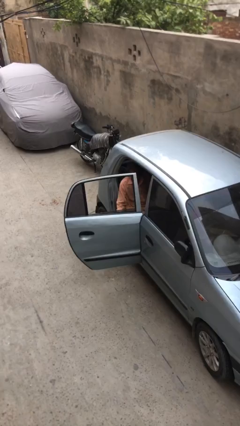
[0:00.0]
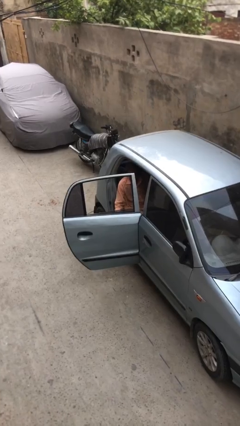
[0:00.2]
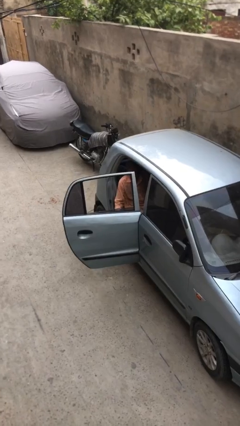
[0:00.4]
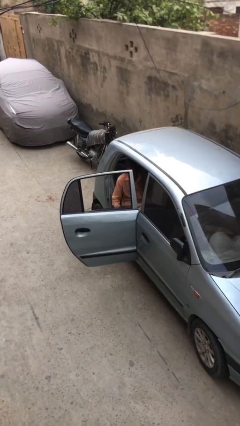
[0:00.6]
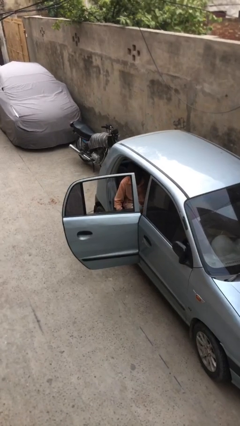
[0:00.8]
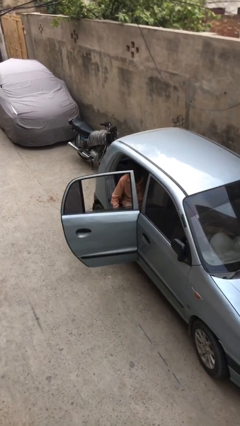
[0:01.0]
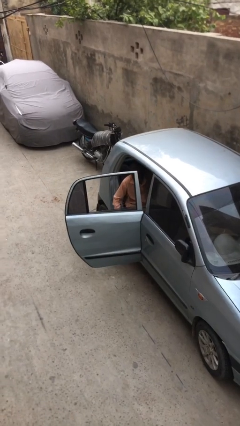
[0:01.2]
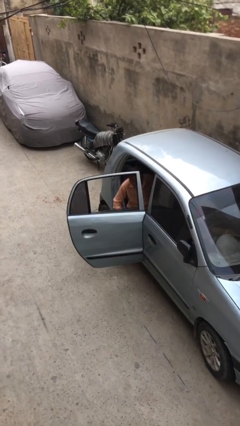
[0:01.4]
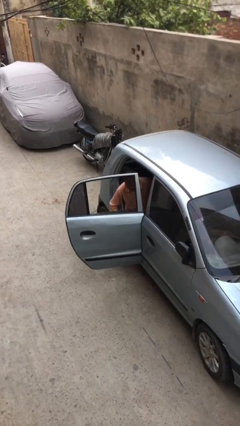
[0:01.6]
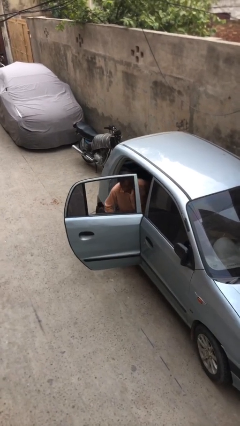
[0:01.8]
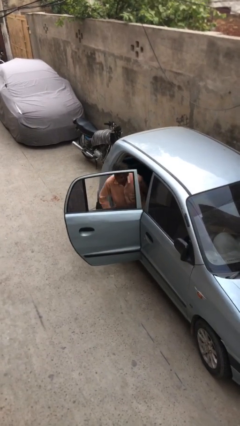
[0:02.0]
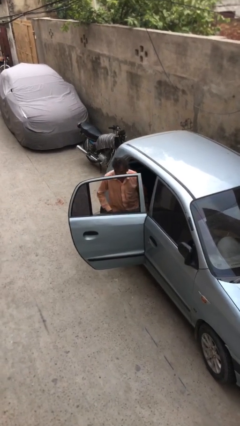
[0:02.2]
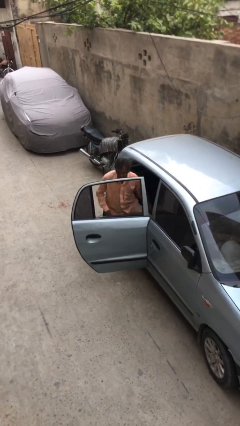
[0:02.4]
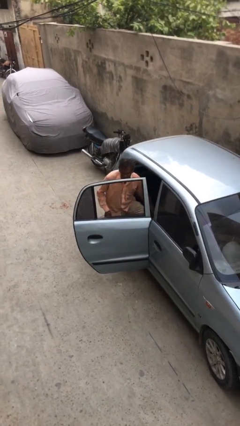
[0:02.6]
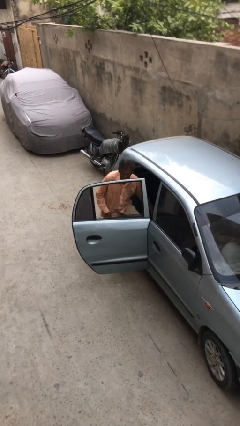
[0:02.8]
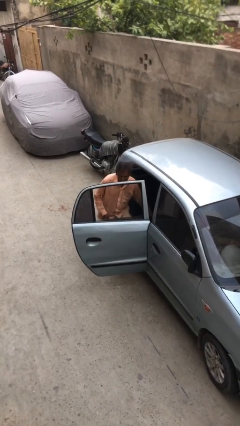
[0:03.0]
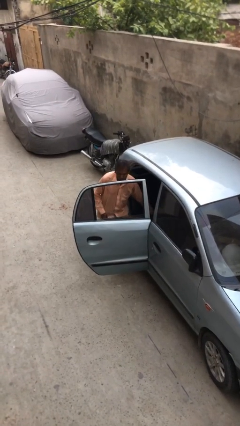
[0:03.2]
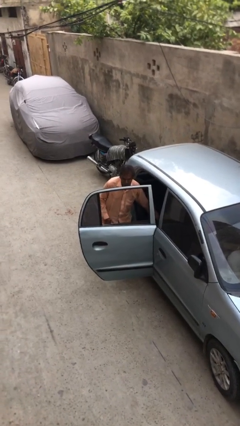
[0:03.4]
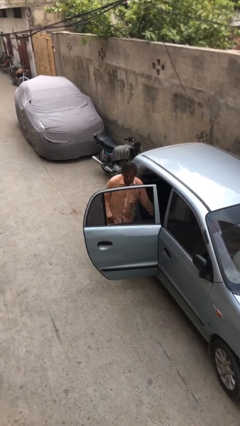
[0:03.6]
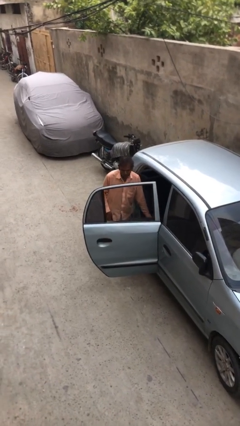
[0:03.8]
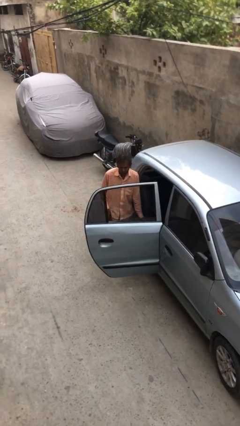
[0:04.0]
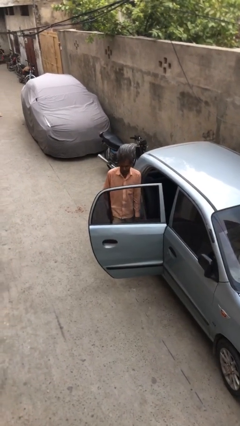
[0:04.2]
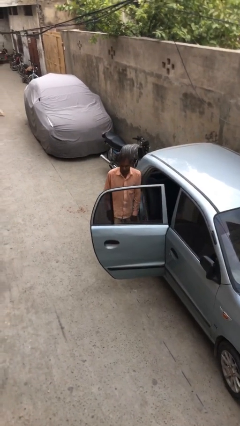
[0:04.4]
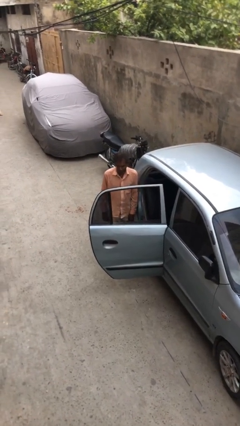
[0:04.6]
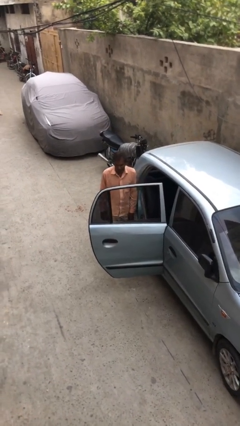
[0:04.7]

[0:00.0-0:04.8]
person exits car

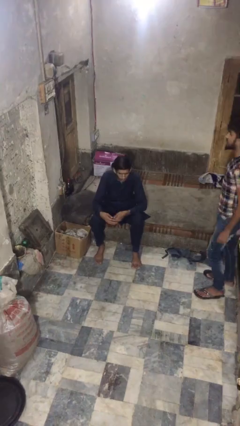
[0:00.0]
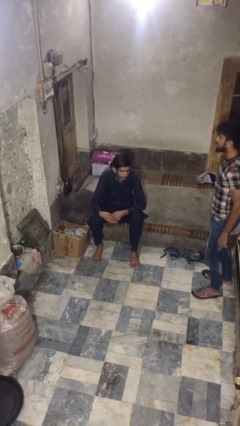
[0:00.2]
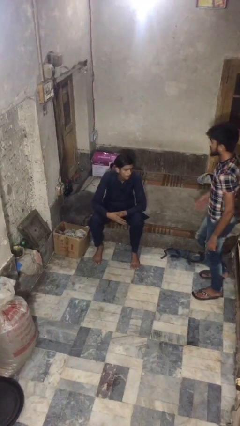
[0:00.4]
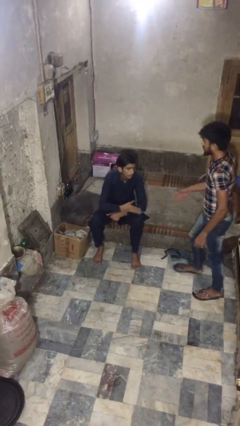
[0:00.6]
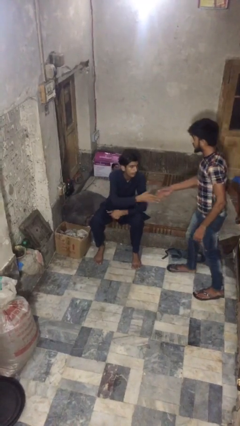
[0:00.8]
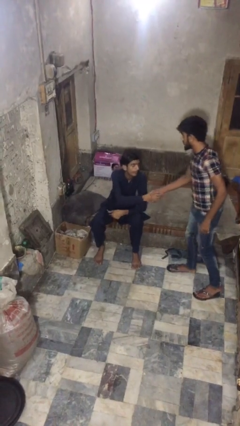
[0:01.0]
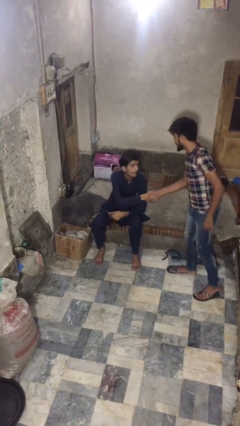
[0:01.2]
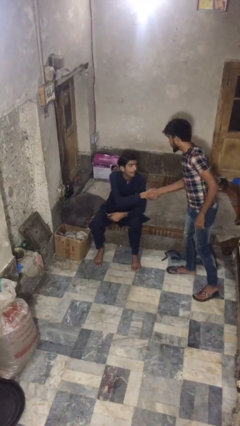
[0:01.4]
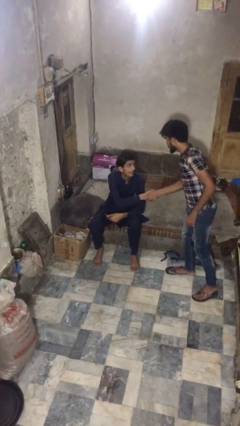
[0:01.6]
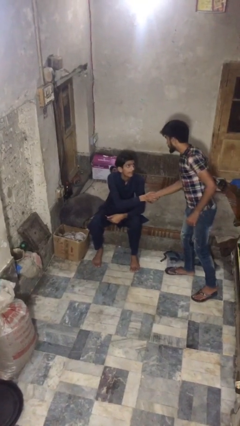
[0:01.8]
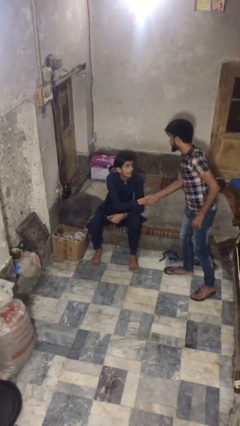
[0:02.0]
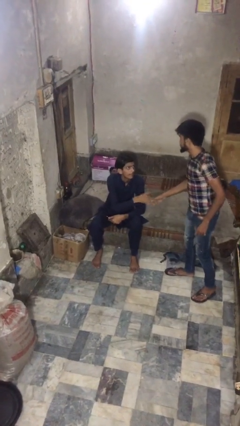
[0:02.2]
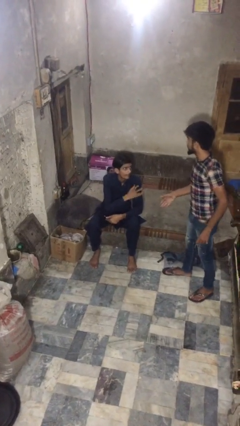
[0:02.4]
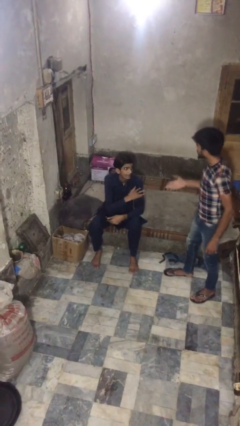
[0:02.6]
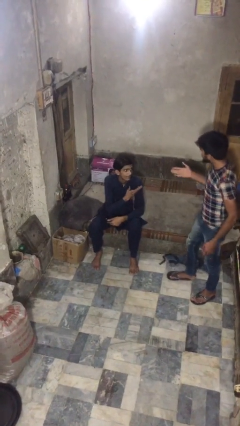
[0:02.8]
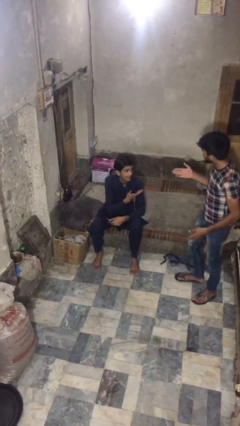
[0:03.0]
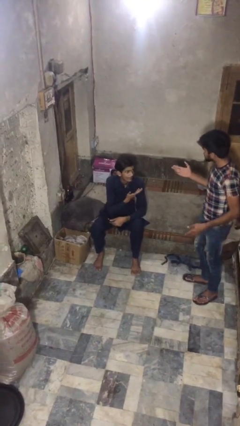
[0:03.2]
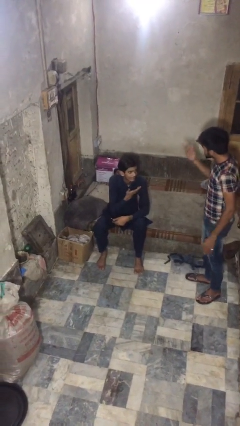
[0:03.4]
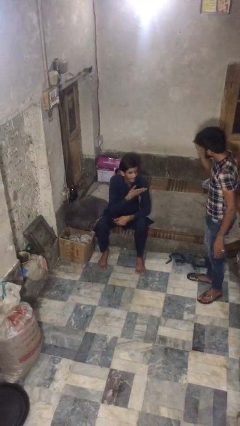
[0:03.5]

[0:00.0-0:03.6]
person shakes hand

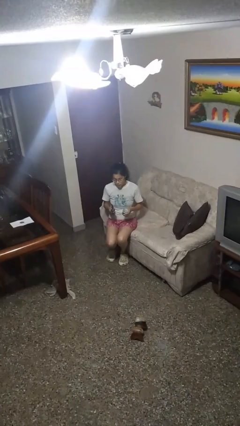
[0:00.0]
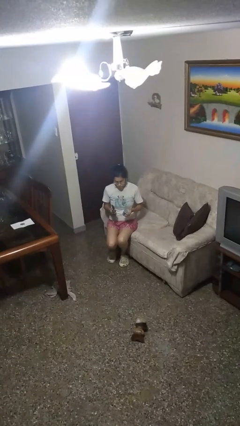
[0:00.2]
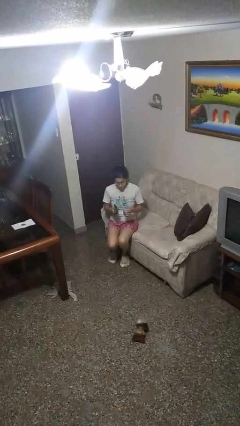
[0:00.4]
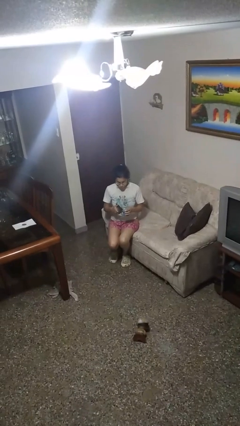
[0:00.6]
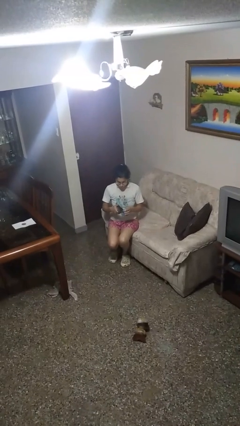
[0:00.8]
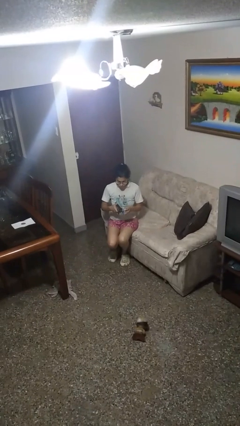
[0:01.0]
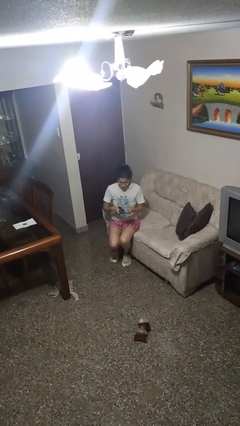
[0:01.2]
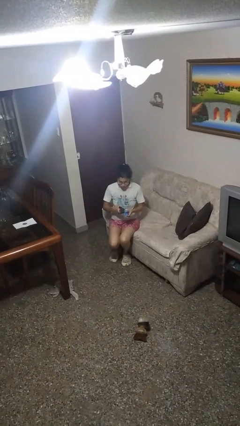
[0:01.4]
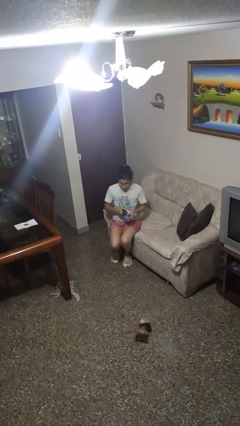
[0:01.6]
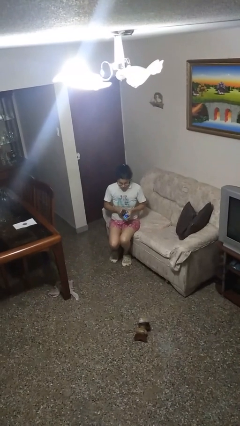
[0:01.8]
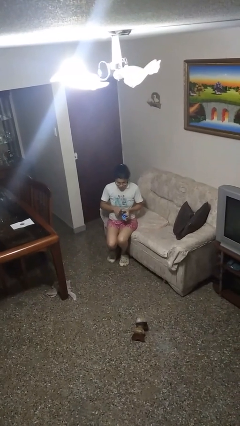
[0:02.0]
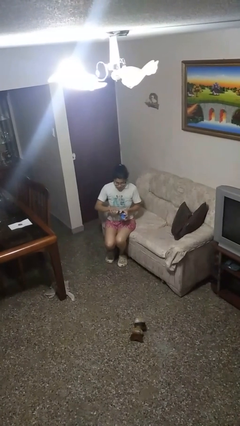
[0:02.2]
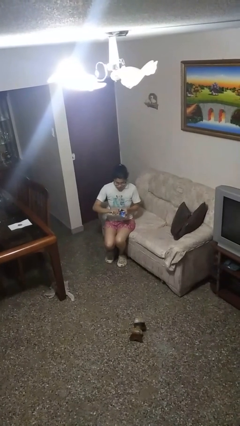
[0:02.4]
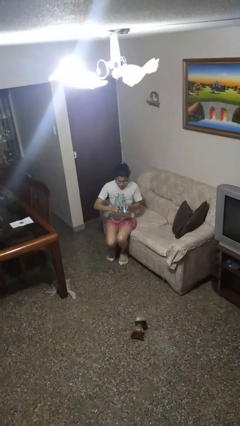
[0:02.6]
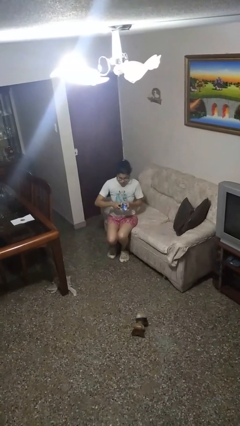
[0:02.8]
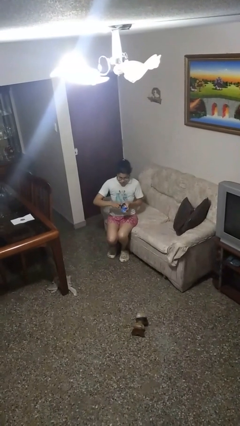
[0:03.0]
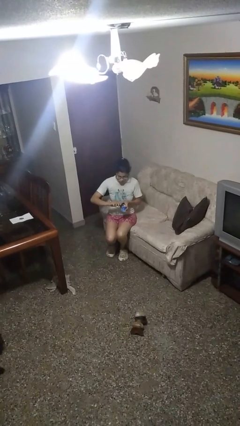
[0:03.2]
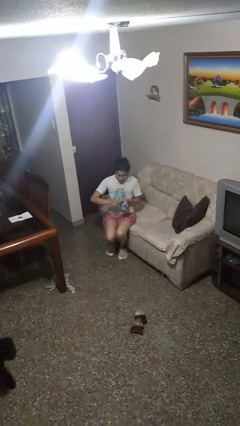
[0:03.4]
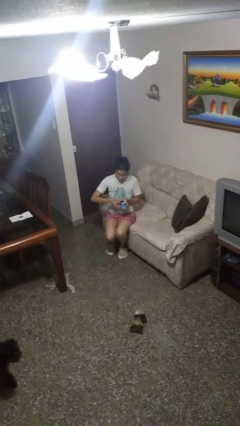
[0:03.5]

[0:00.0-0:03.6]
person opens can with can opener

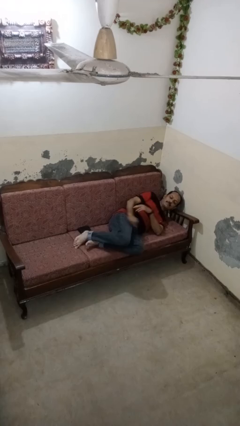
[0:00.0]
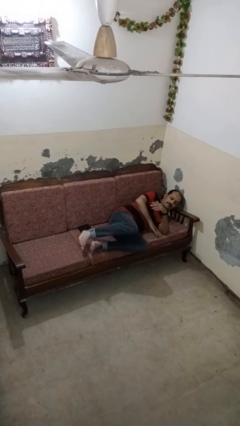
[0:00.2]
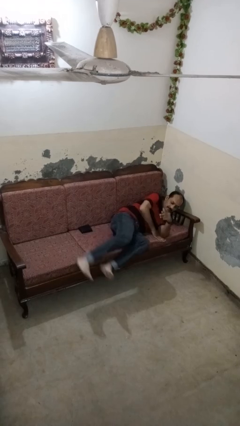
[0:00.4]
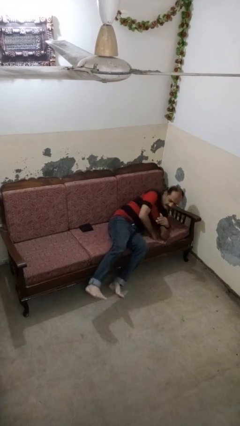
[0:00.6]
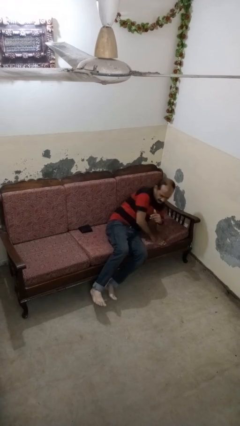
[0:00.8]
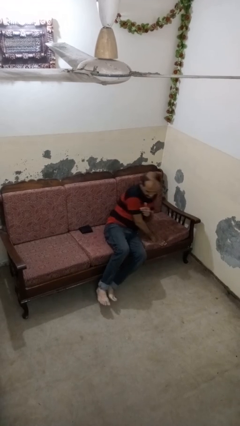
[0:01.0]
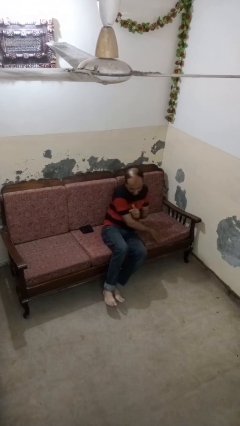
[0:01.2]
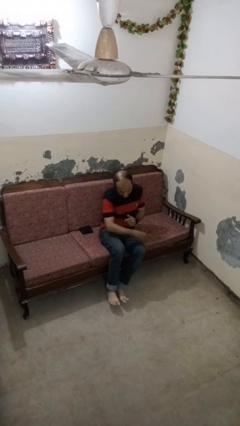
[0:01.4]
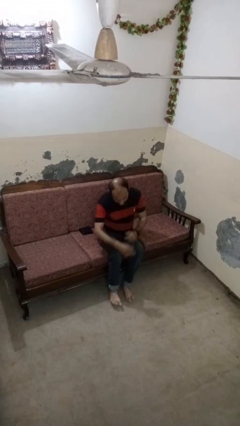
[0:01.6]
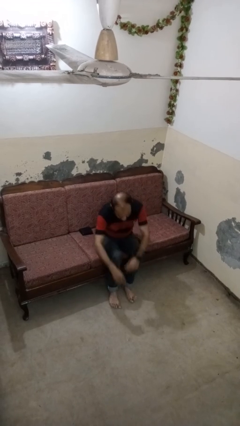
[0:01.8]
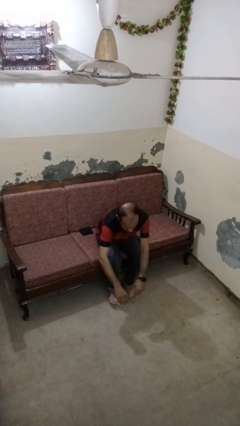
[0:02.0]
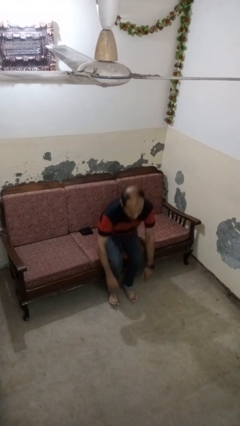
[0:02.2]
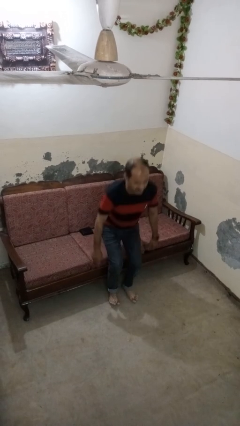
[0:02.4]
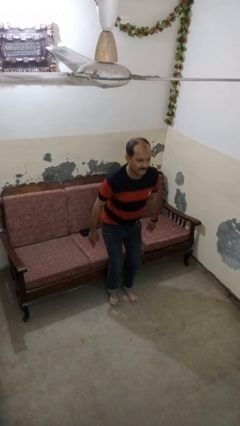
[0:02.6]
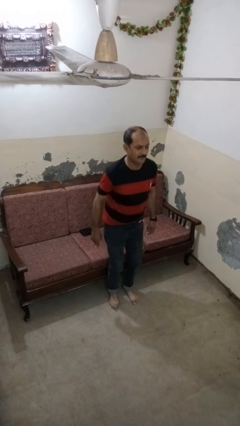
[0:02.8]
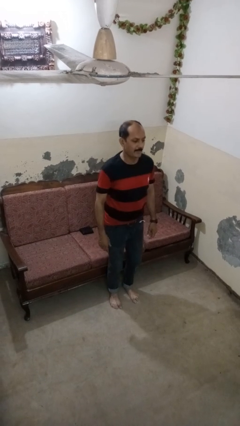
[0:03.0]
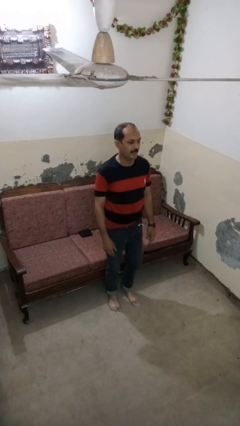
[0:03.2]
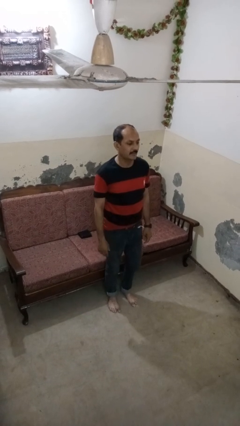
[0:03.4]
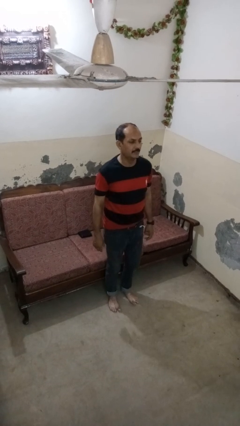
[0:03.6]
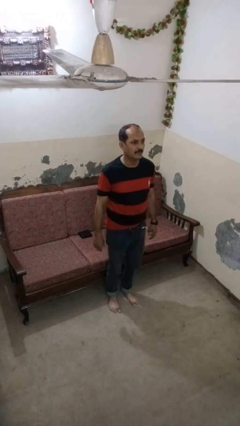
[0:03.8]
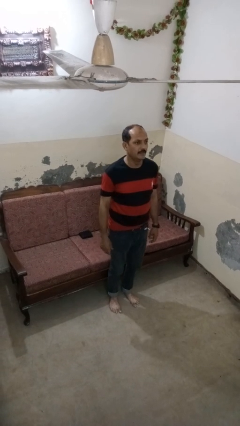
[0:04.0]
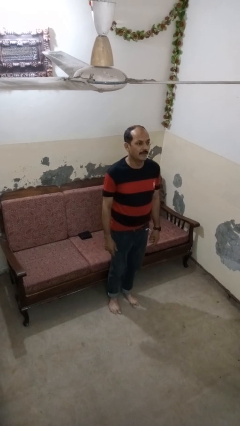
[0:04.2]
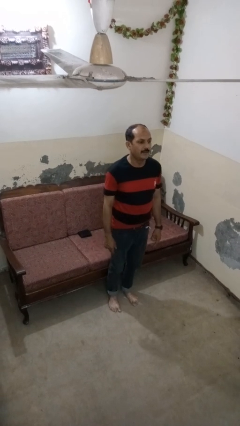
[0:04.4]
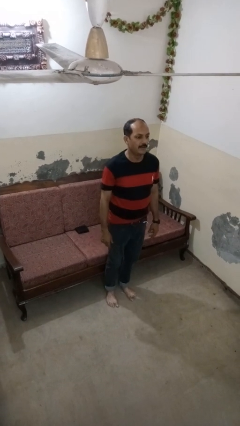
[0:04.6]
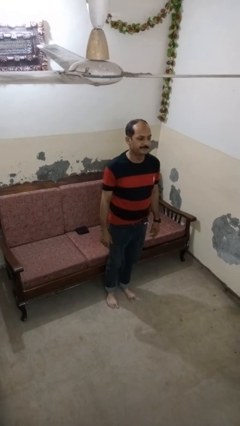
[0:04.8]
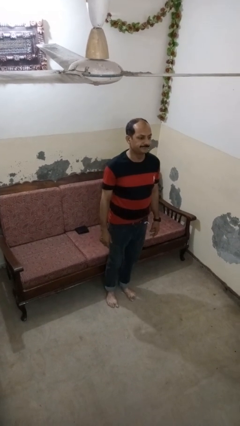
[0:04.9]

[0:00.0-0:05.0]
person stands up

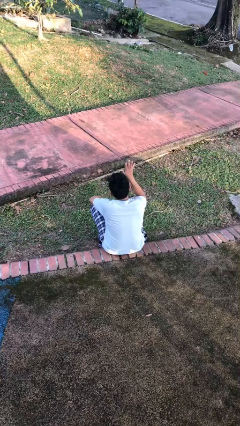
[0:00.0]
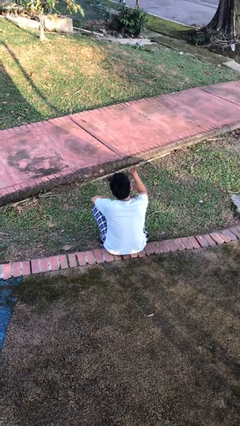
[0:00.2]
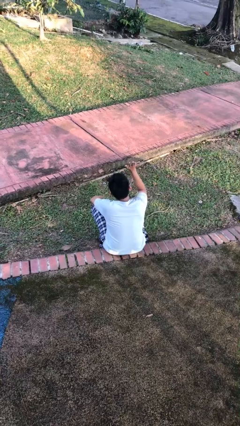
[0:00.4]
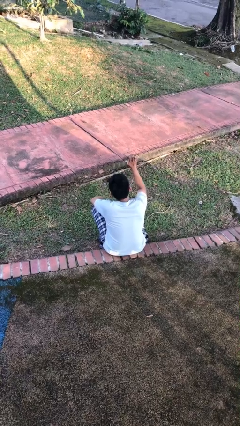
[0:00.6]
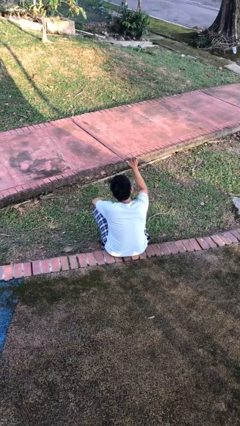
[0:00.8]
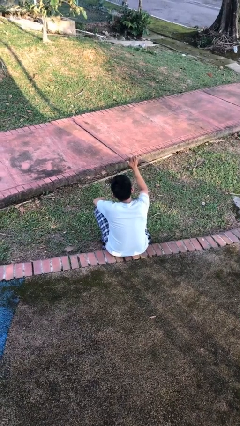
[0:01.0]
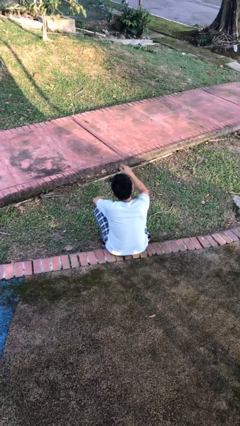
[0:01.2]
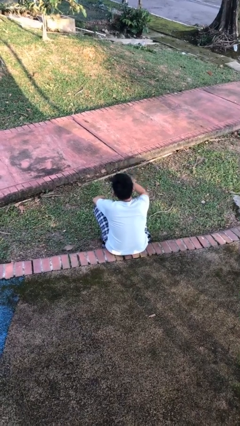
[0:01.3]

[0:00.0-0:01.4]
person gestures stop
